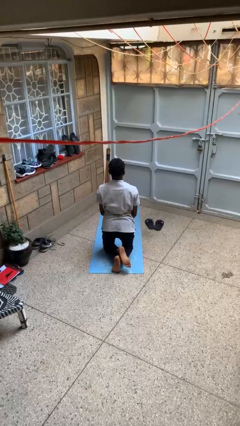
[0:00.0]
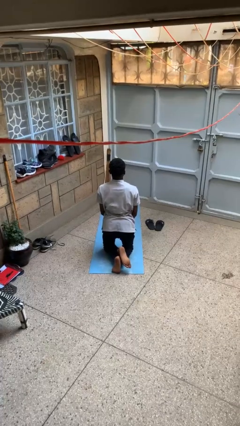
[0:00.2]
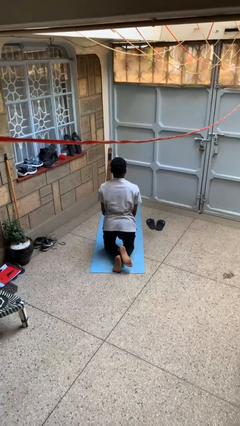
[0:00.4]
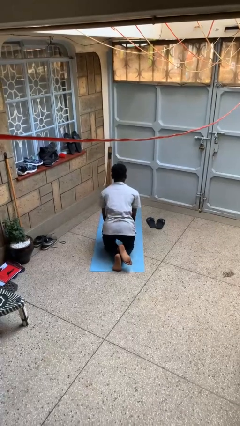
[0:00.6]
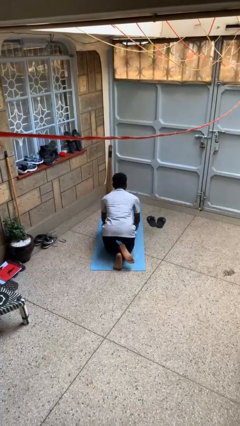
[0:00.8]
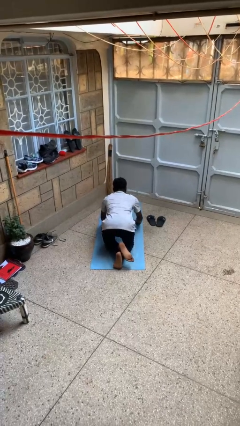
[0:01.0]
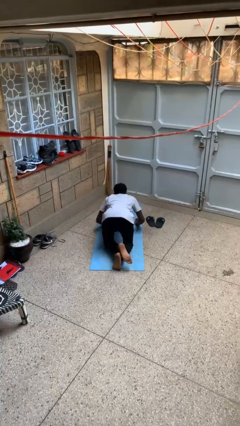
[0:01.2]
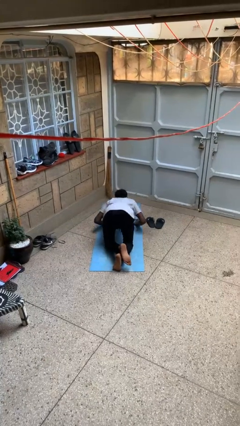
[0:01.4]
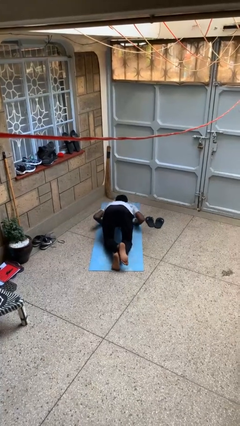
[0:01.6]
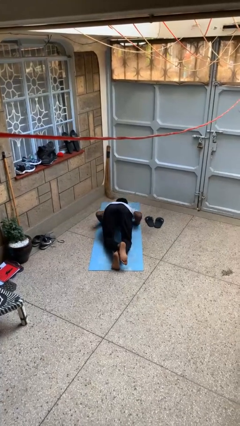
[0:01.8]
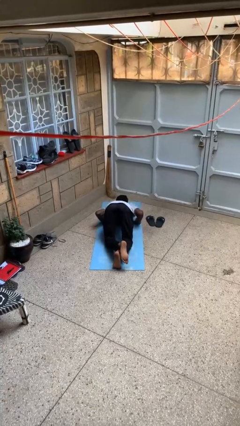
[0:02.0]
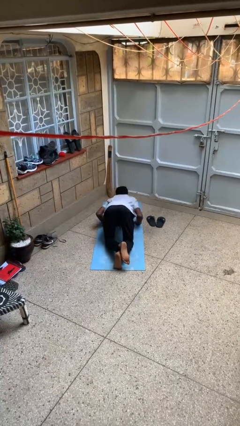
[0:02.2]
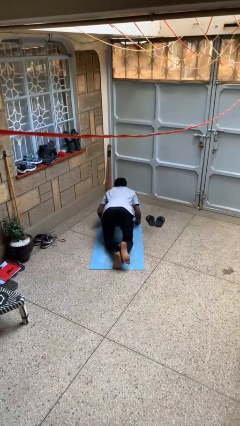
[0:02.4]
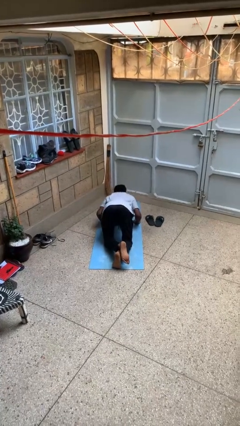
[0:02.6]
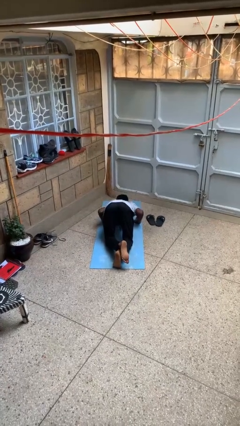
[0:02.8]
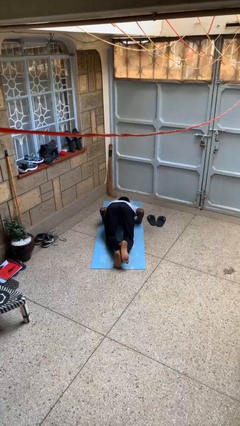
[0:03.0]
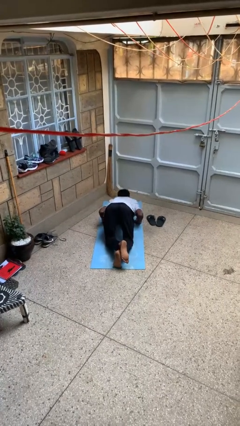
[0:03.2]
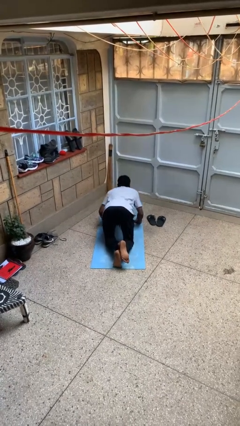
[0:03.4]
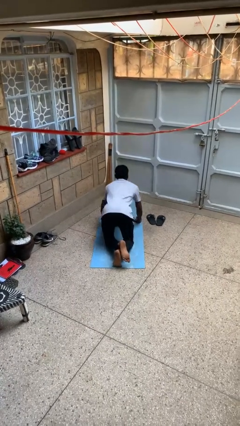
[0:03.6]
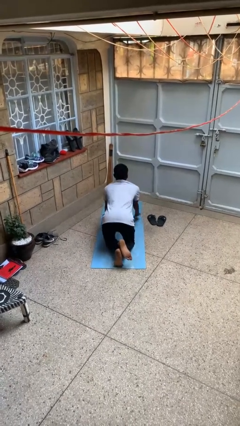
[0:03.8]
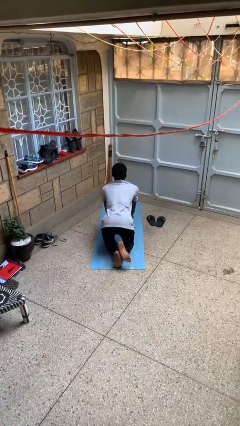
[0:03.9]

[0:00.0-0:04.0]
person exercises with pushup

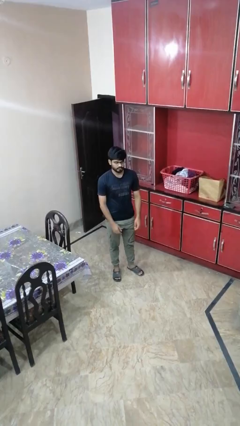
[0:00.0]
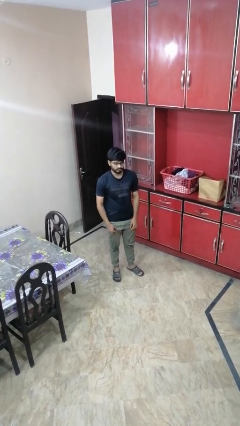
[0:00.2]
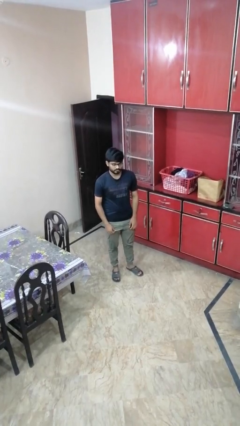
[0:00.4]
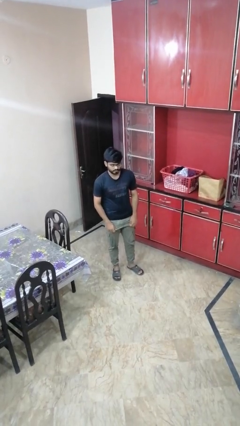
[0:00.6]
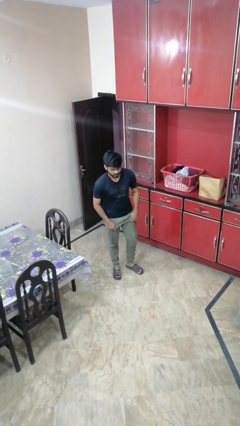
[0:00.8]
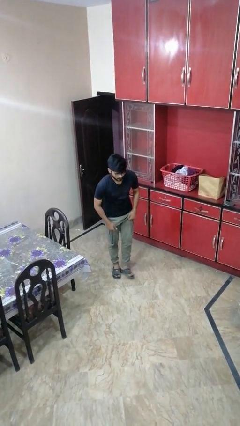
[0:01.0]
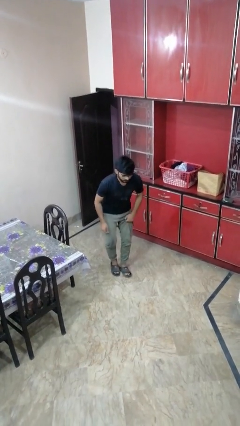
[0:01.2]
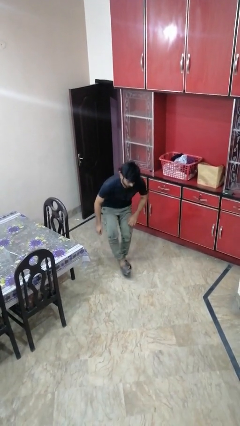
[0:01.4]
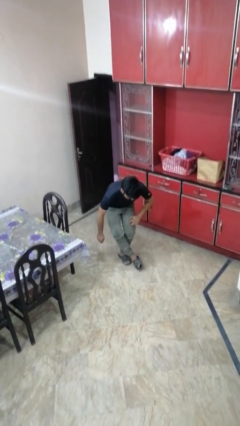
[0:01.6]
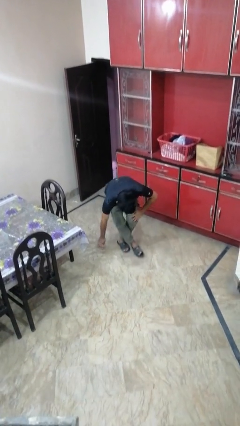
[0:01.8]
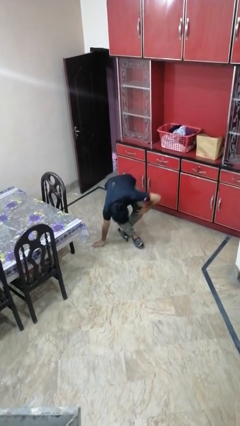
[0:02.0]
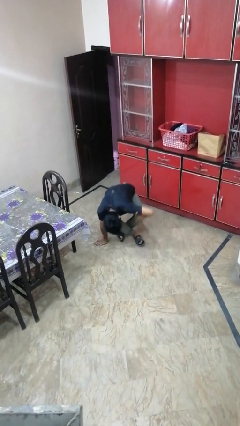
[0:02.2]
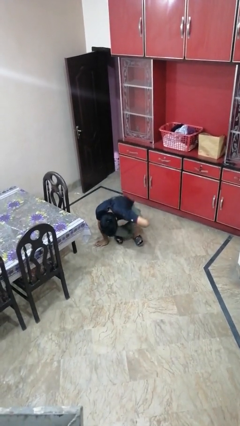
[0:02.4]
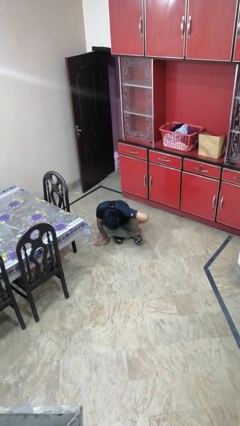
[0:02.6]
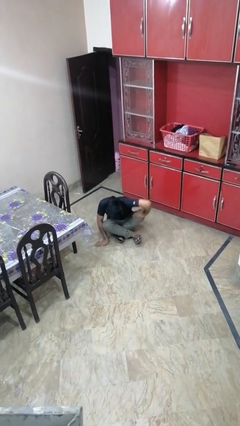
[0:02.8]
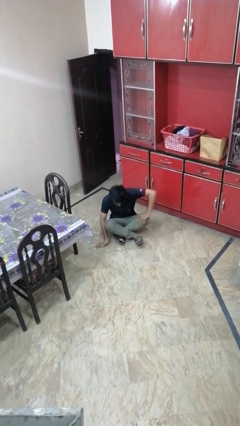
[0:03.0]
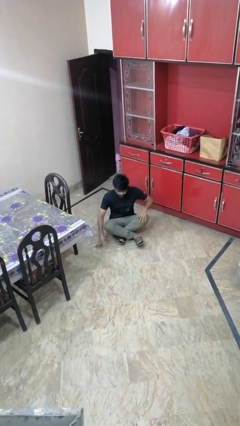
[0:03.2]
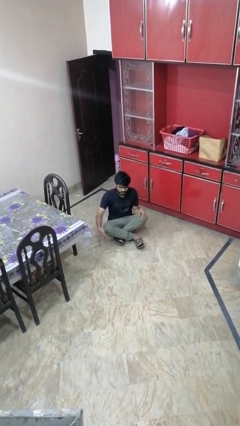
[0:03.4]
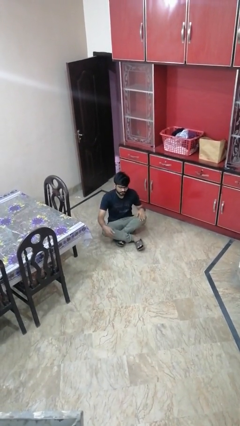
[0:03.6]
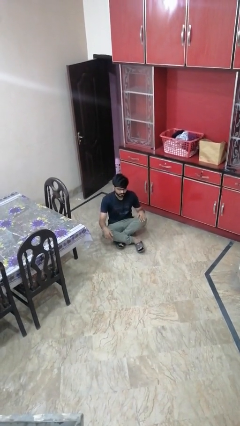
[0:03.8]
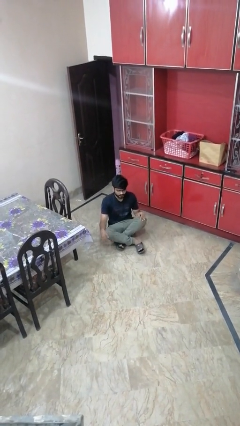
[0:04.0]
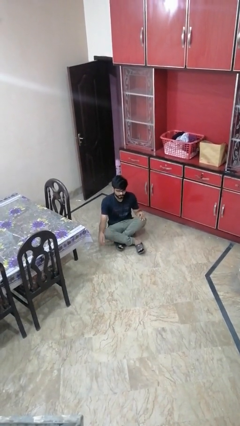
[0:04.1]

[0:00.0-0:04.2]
person sits crisscross

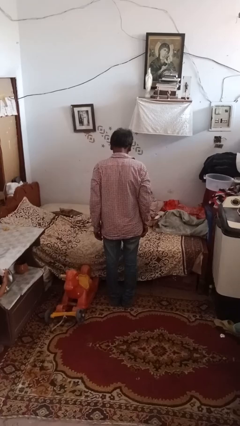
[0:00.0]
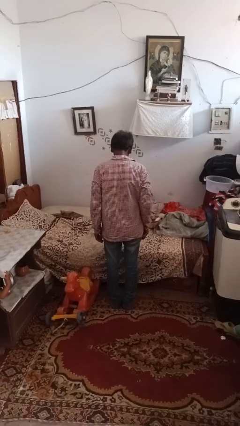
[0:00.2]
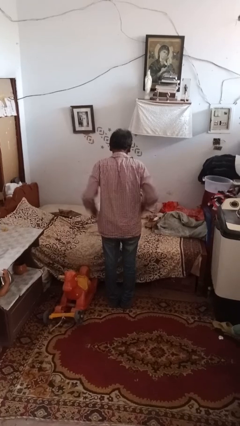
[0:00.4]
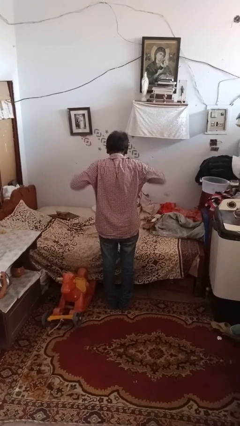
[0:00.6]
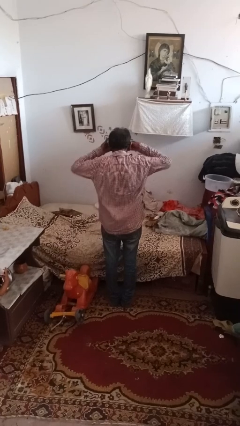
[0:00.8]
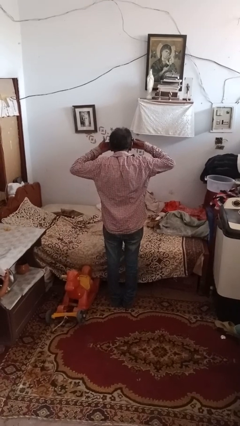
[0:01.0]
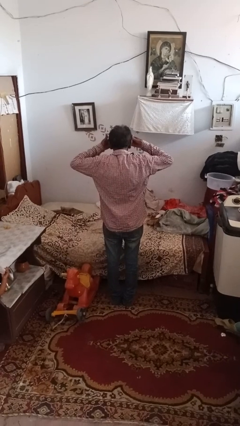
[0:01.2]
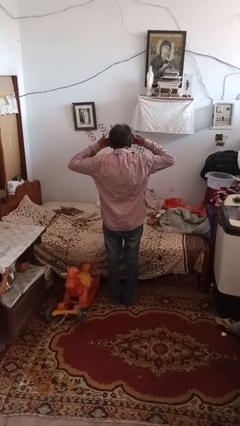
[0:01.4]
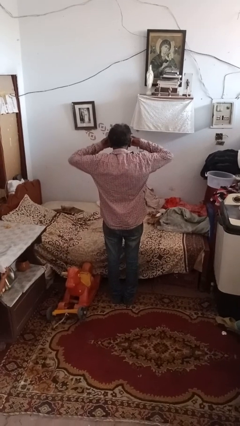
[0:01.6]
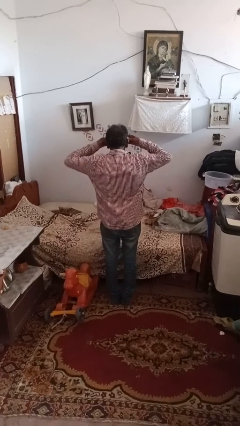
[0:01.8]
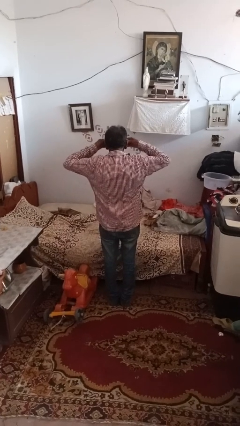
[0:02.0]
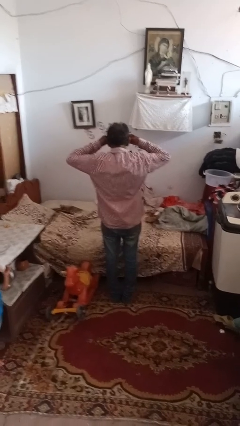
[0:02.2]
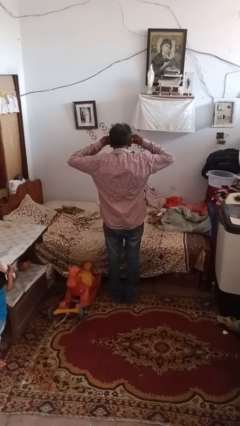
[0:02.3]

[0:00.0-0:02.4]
person rubs eyes

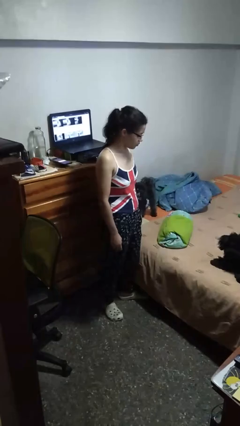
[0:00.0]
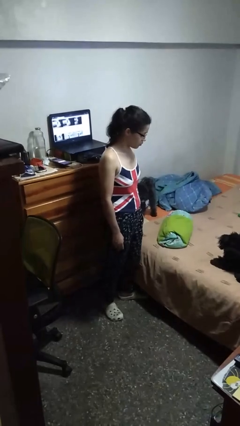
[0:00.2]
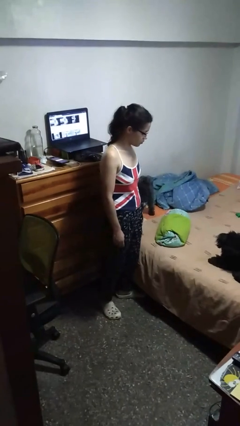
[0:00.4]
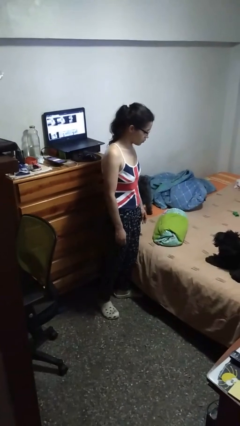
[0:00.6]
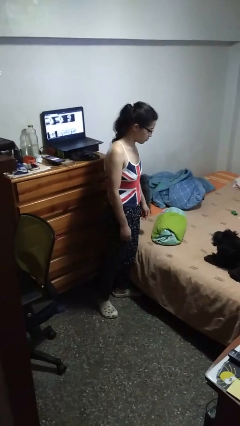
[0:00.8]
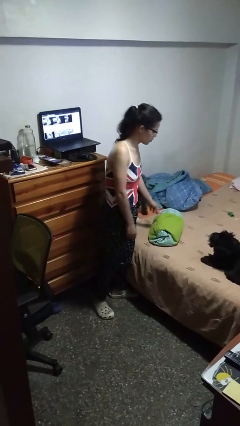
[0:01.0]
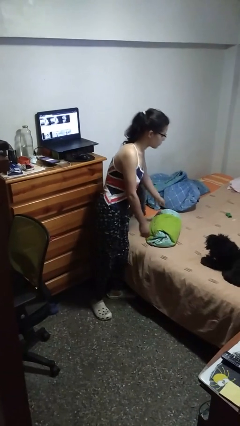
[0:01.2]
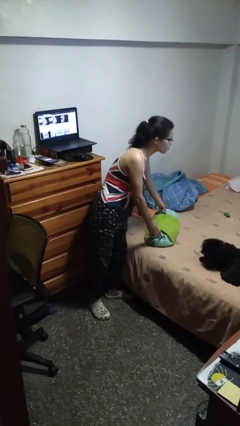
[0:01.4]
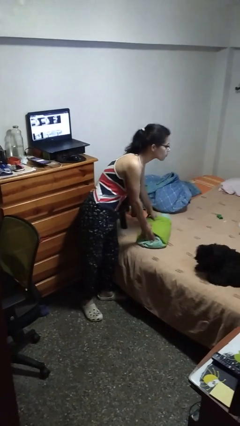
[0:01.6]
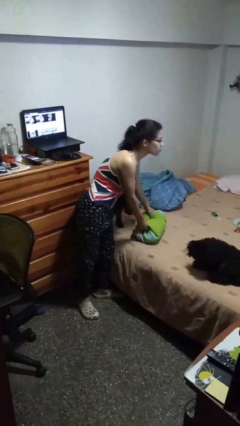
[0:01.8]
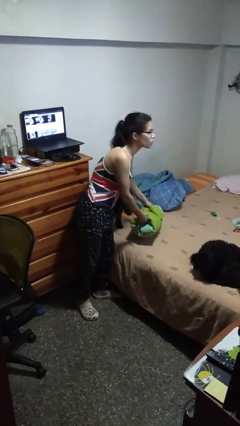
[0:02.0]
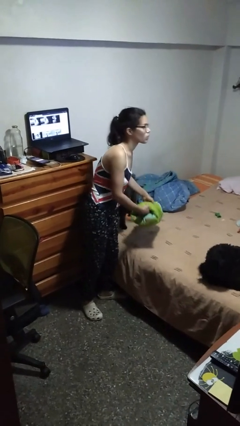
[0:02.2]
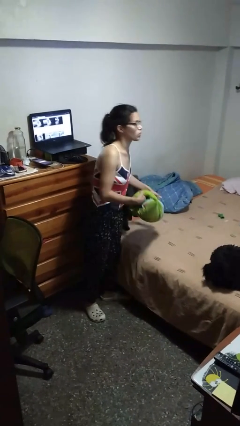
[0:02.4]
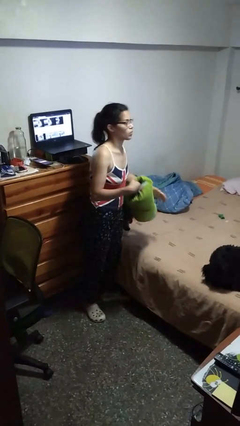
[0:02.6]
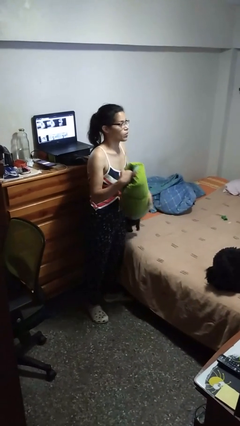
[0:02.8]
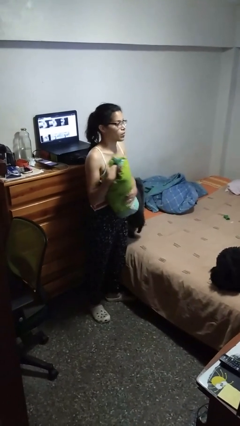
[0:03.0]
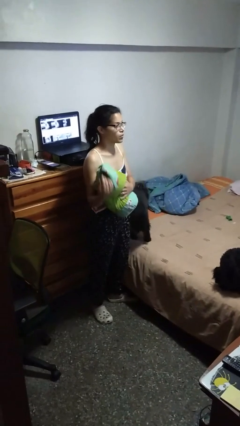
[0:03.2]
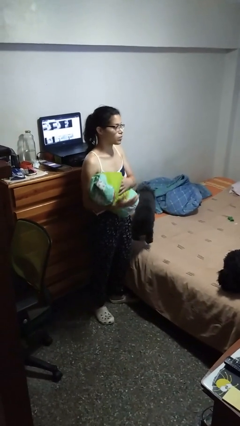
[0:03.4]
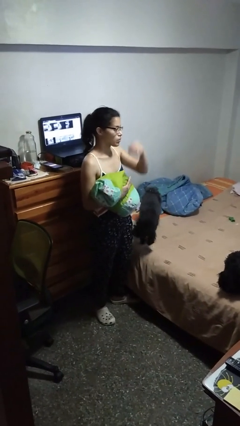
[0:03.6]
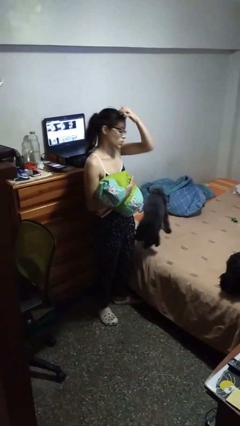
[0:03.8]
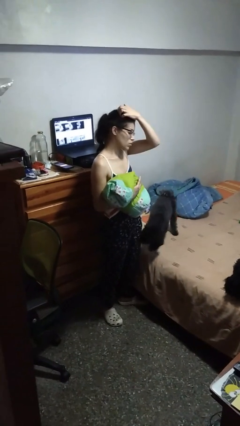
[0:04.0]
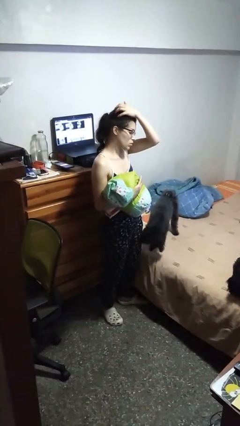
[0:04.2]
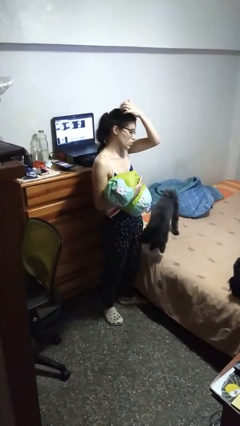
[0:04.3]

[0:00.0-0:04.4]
person picks up object from bed

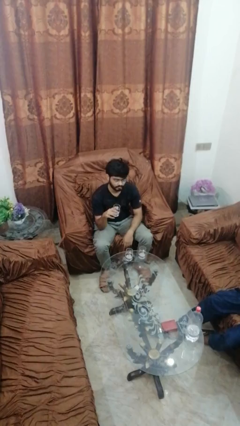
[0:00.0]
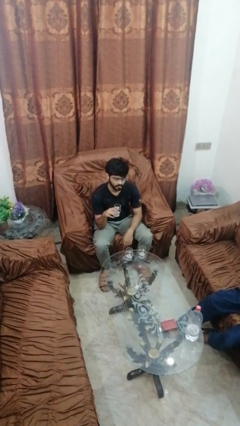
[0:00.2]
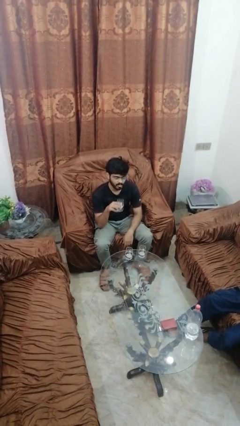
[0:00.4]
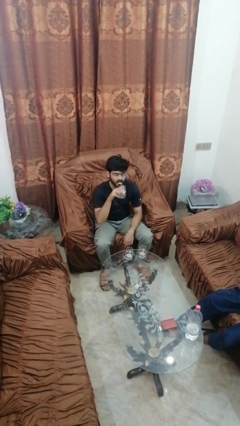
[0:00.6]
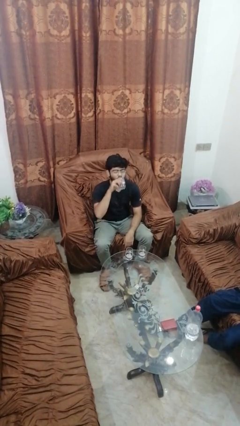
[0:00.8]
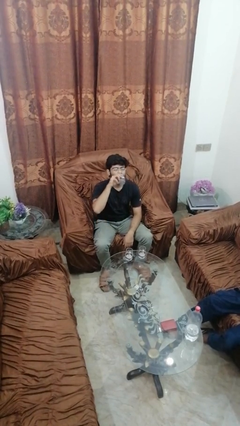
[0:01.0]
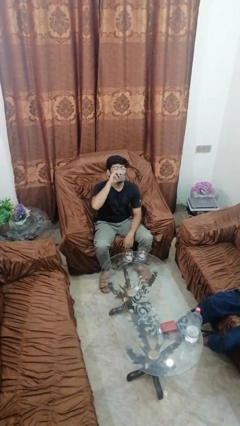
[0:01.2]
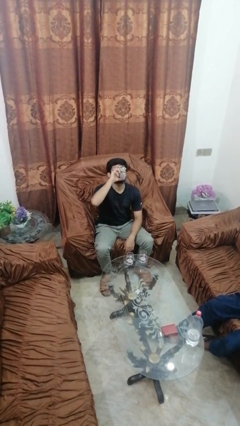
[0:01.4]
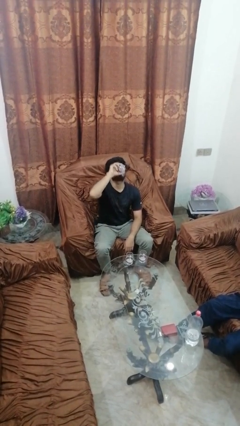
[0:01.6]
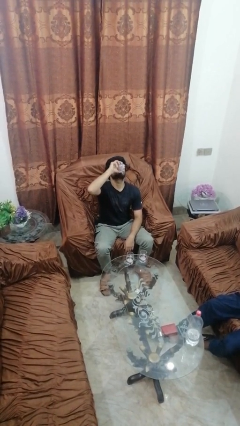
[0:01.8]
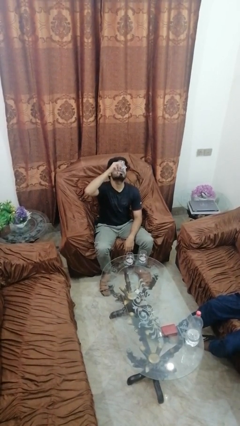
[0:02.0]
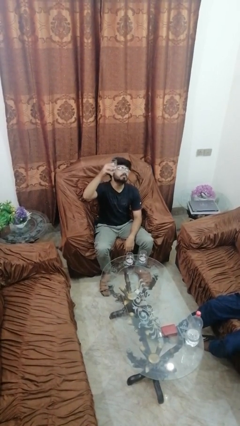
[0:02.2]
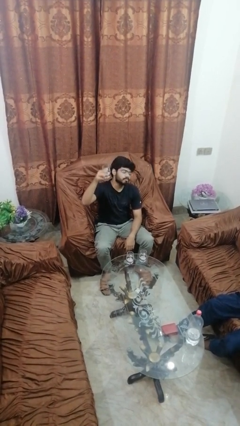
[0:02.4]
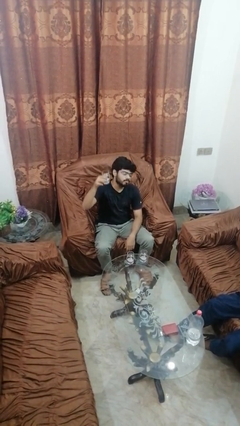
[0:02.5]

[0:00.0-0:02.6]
person drinks from shotglass
